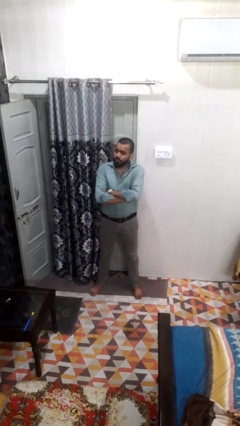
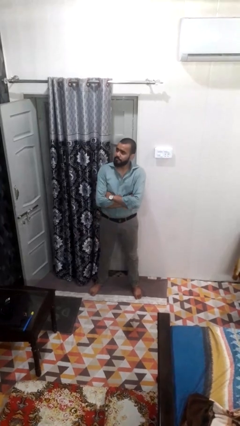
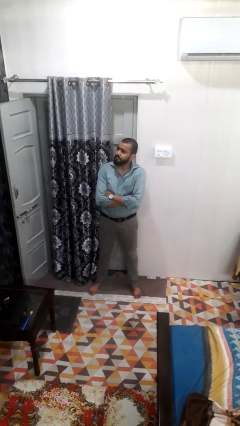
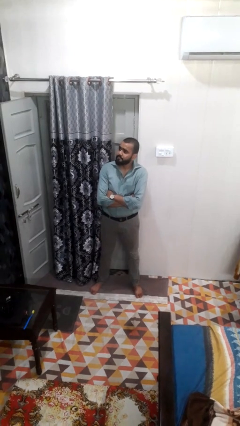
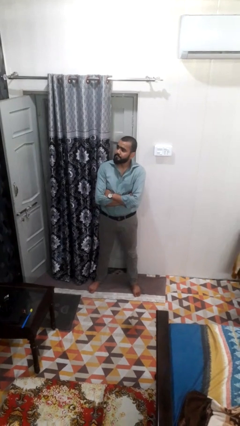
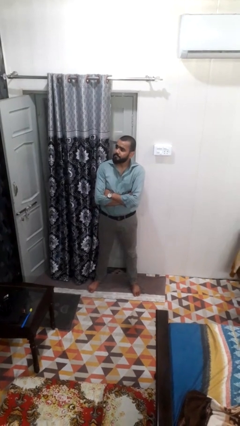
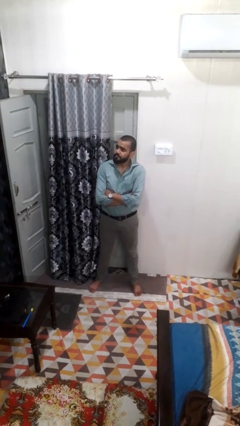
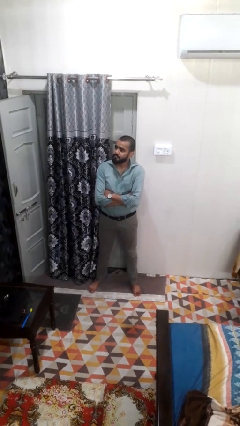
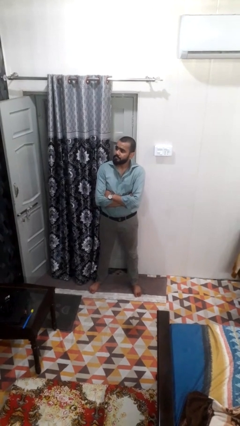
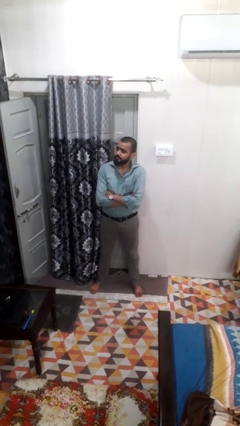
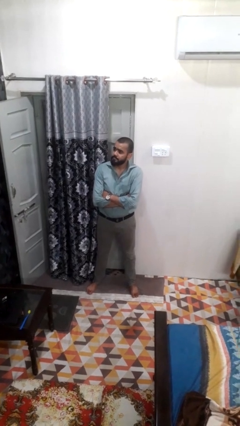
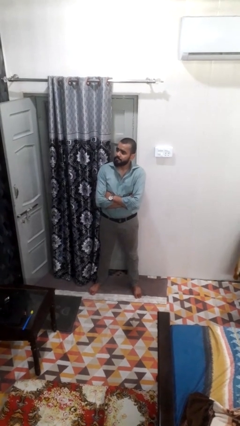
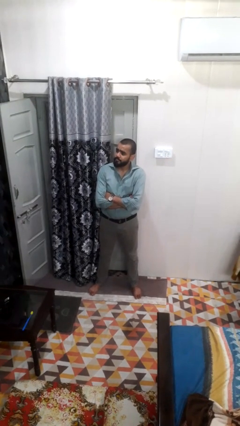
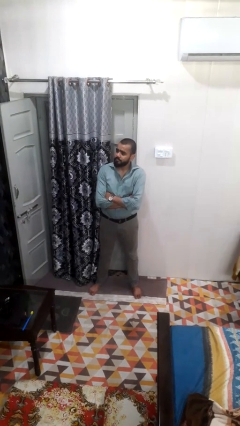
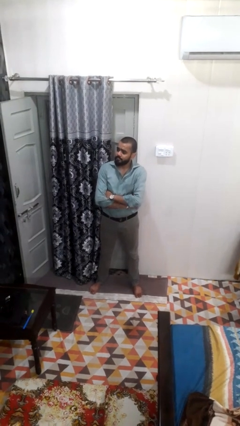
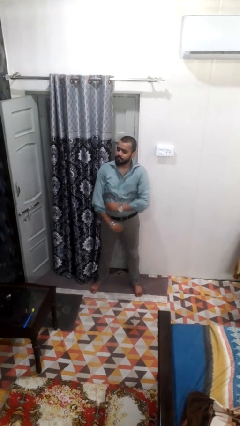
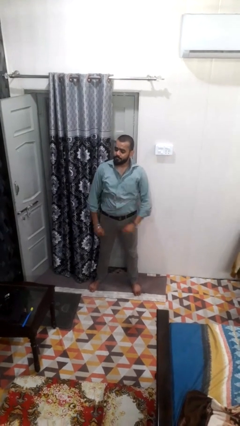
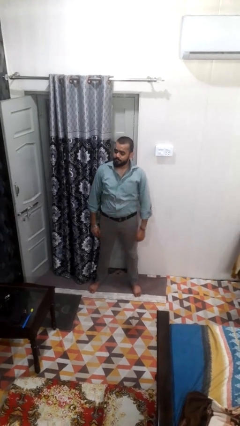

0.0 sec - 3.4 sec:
person crosses arms

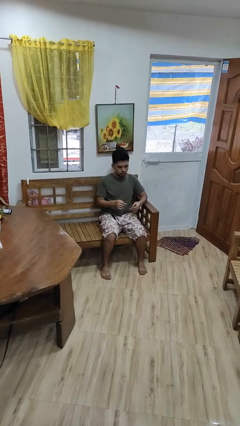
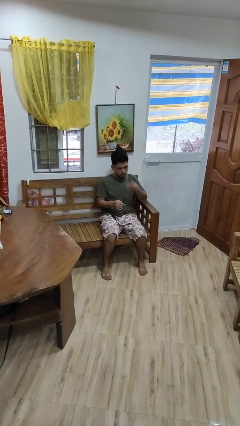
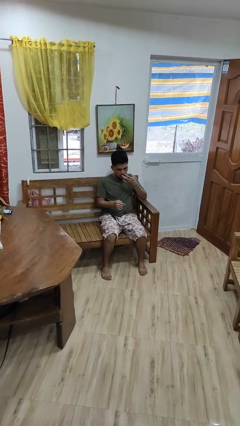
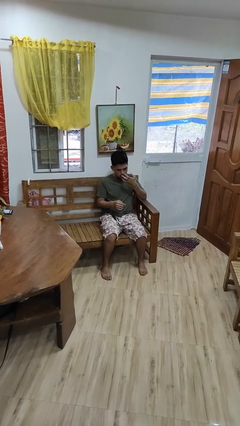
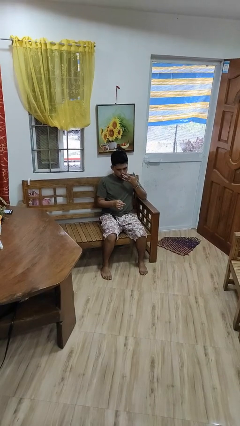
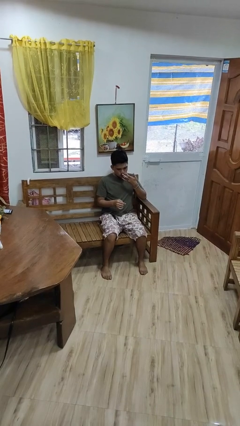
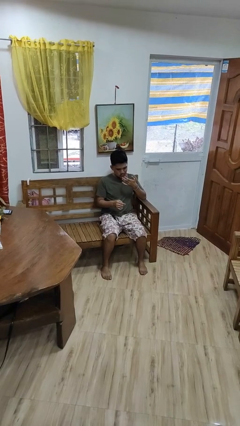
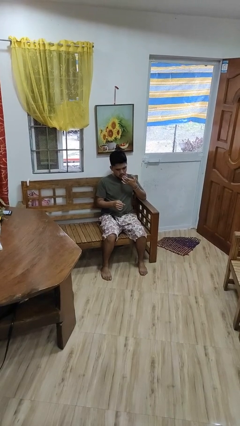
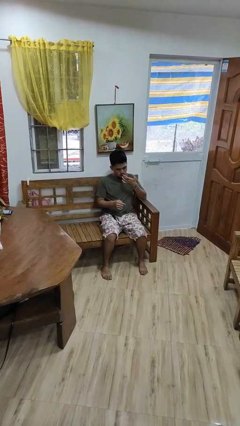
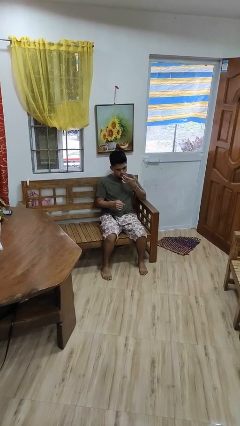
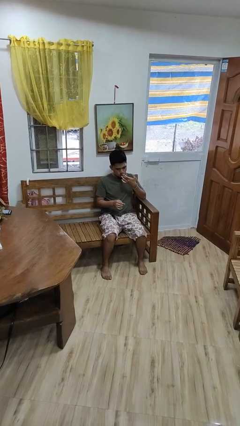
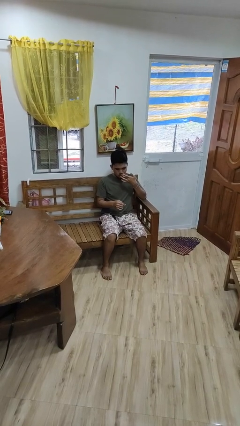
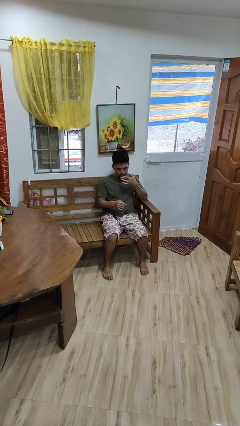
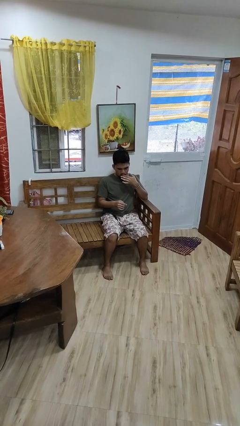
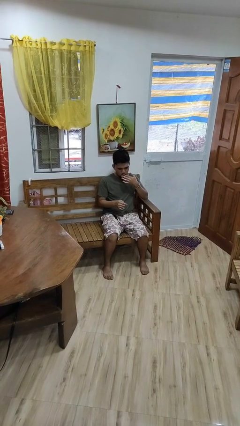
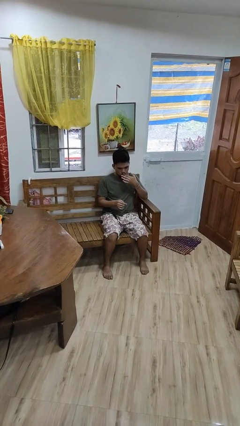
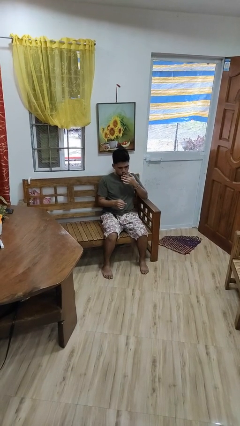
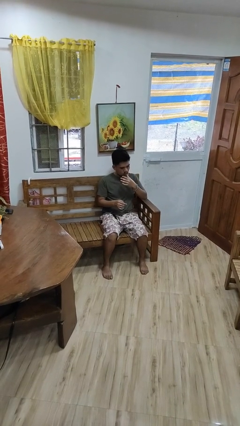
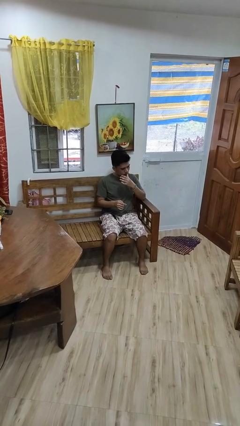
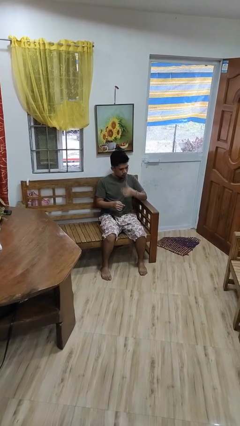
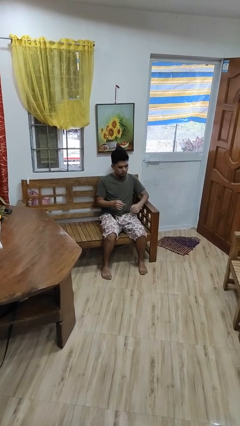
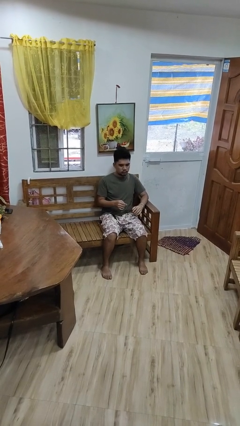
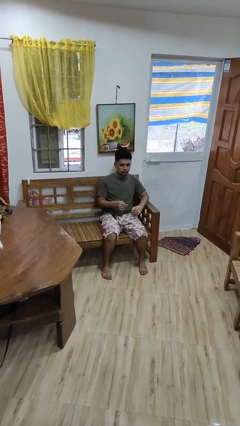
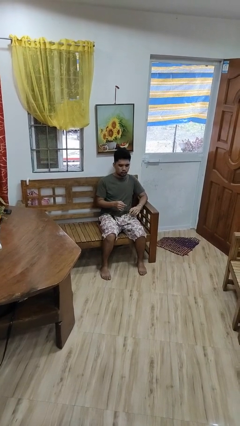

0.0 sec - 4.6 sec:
person licks fingers

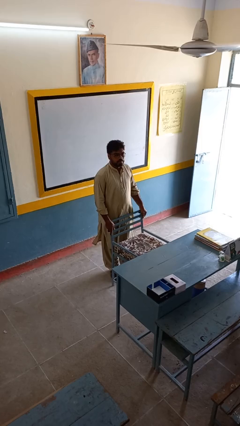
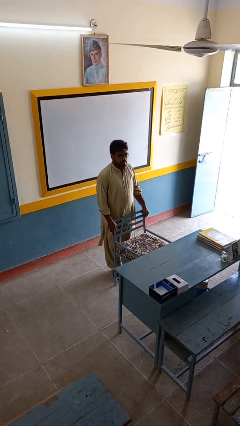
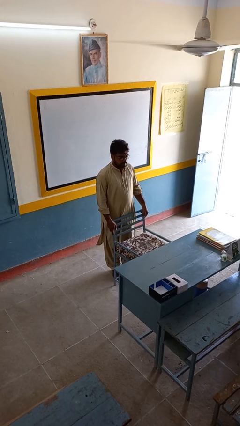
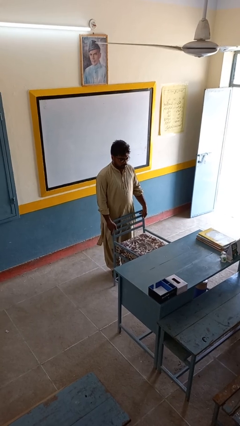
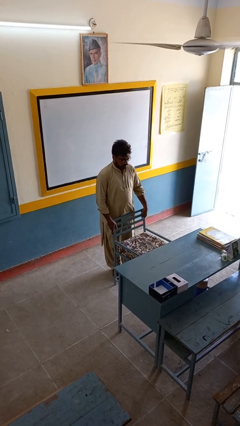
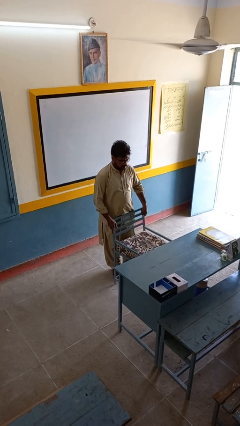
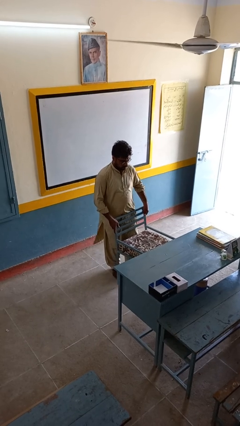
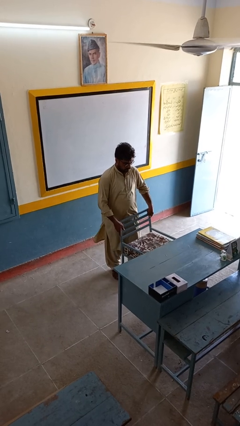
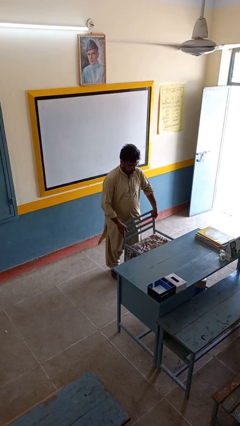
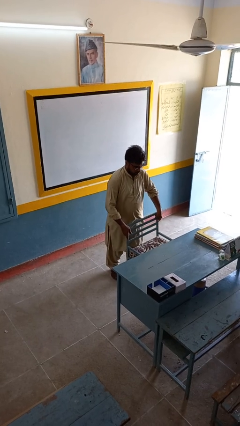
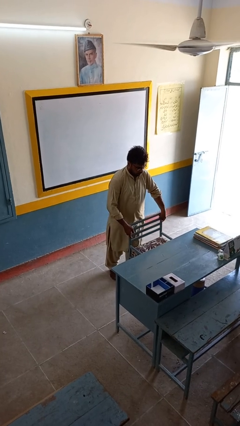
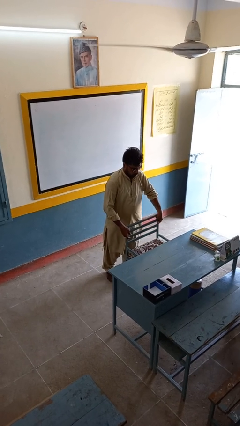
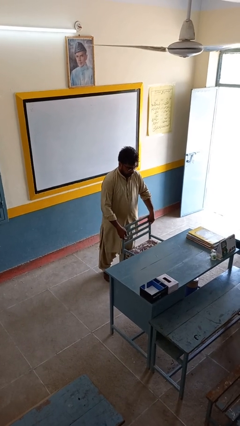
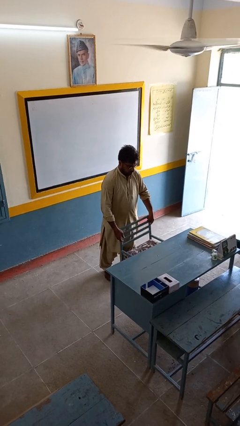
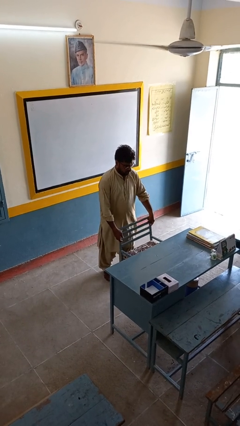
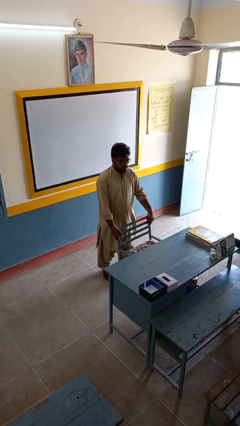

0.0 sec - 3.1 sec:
person pushes in chair

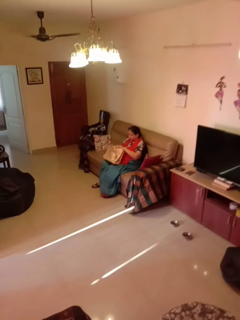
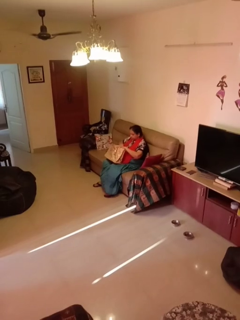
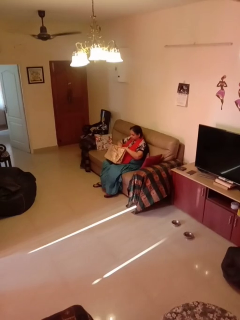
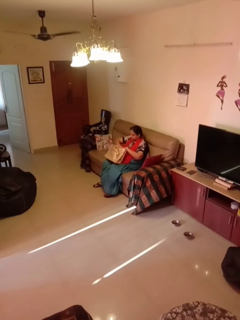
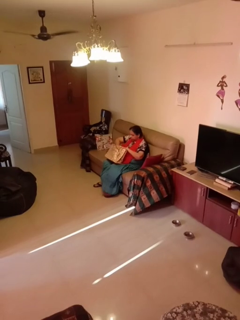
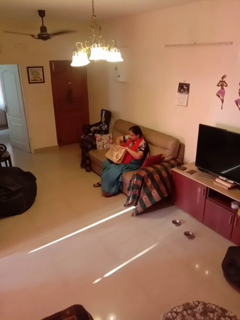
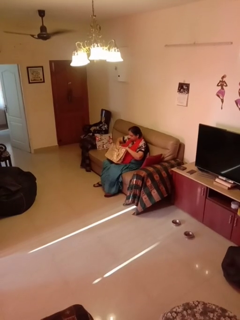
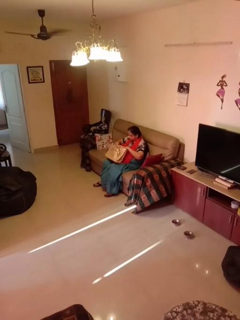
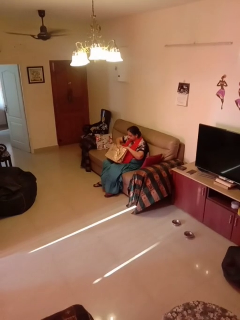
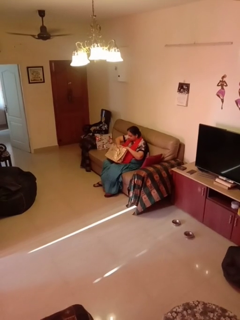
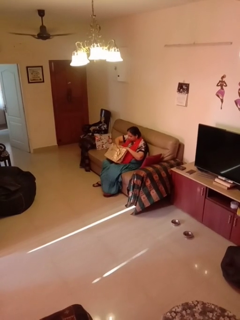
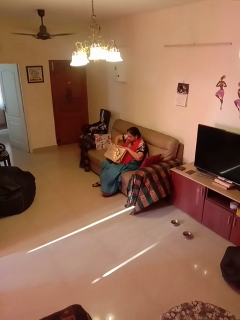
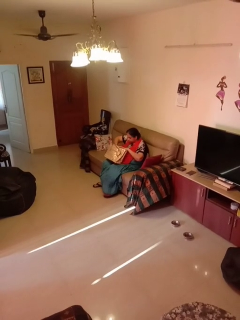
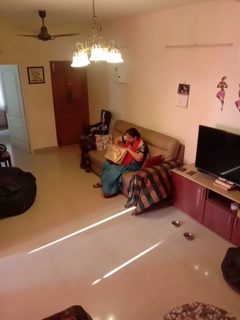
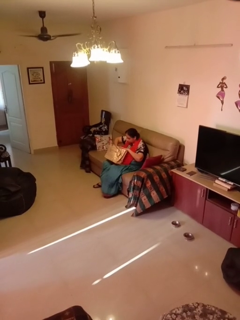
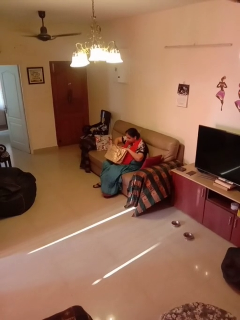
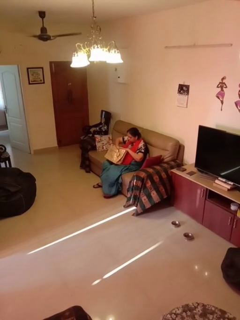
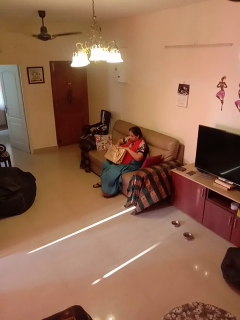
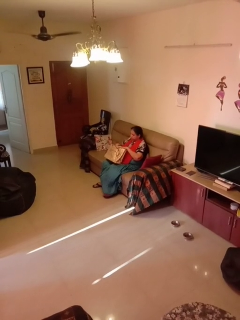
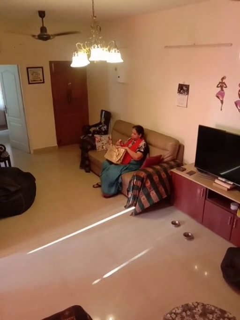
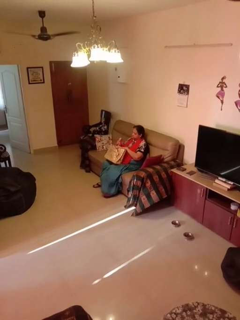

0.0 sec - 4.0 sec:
person searches in purse

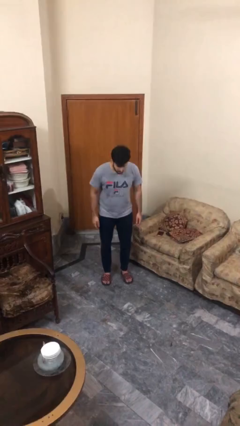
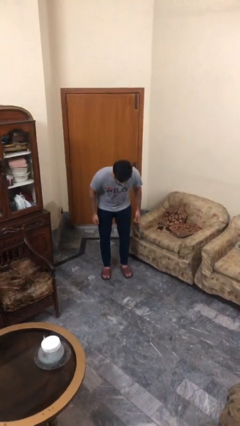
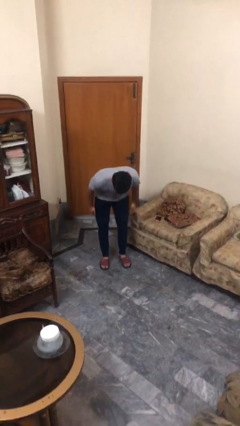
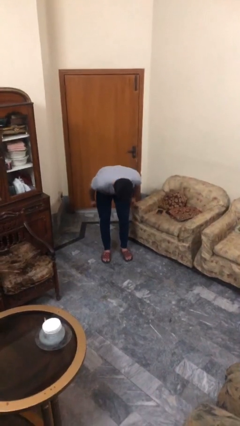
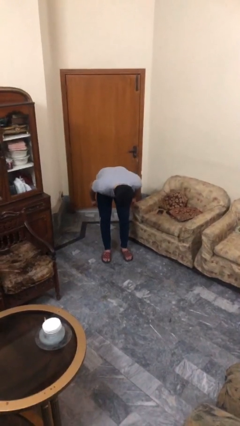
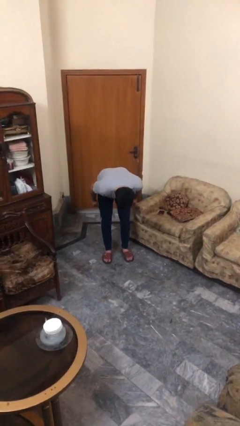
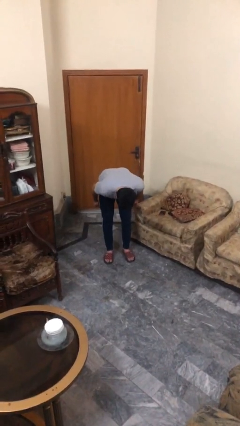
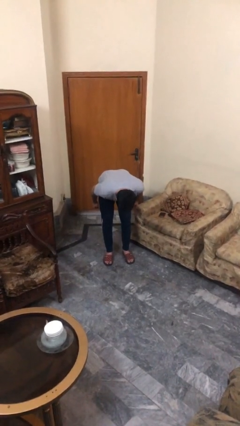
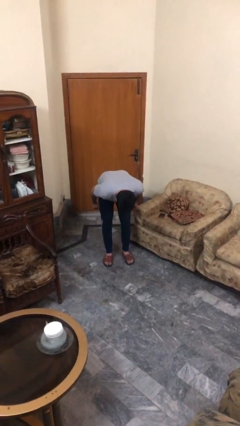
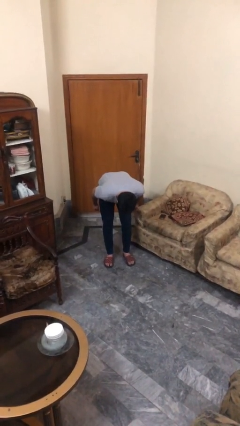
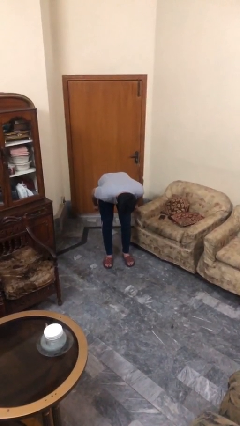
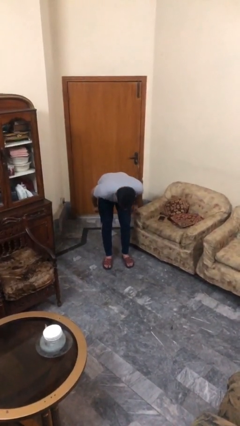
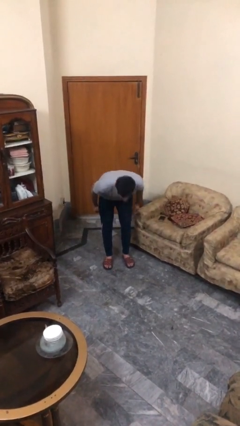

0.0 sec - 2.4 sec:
person bows

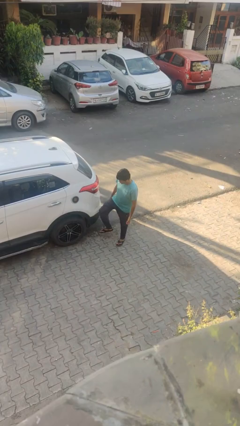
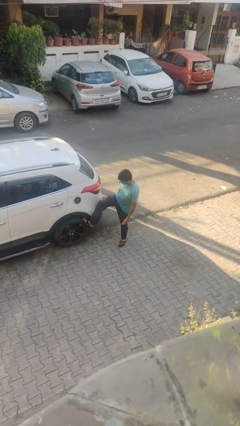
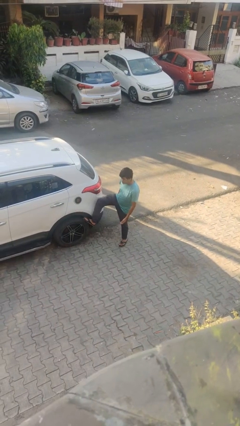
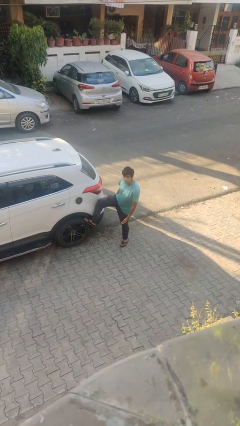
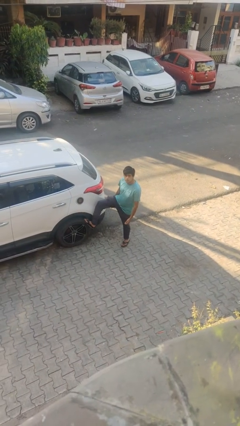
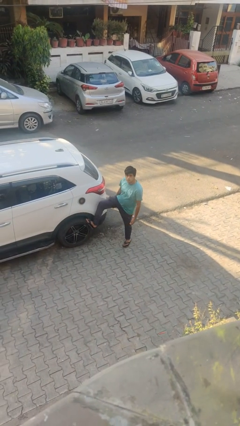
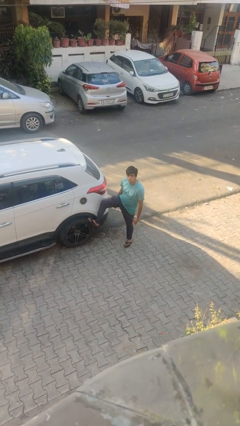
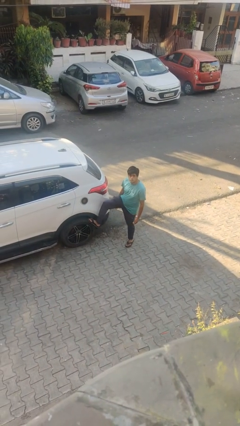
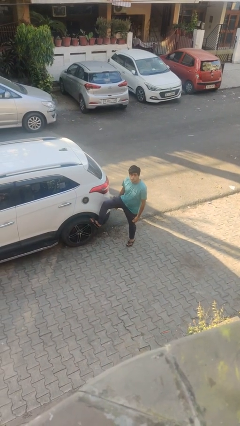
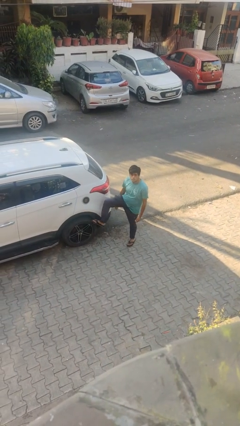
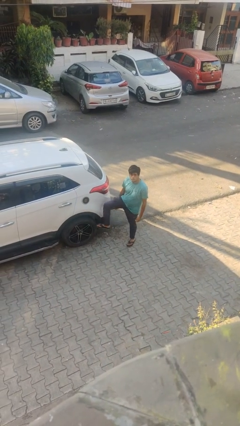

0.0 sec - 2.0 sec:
person kicks car tires
